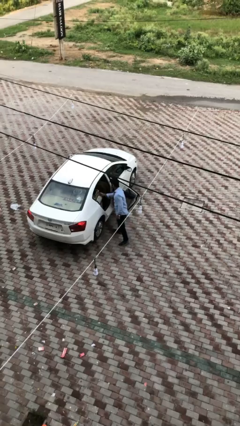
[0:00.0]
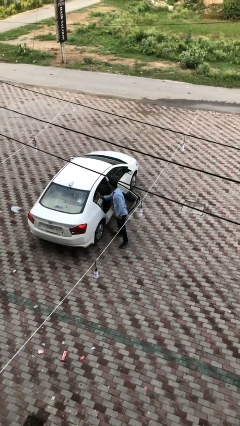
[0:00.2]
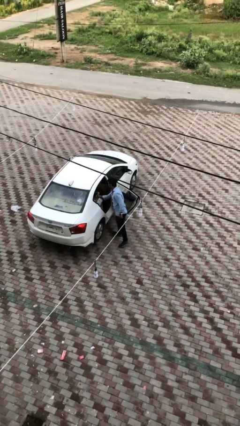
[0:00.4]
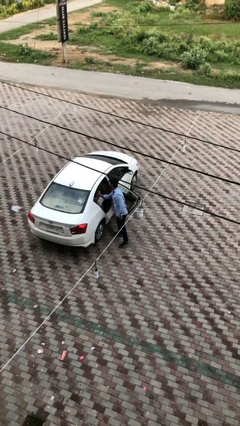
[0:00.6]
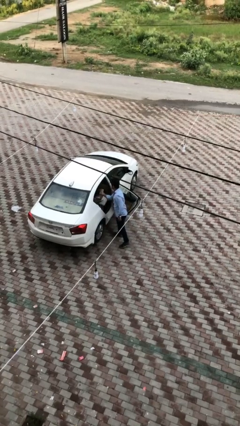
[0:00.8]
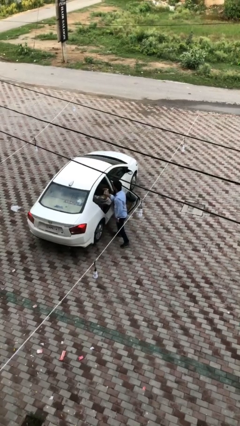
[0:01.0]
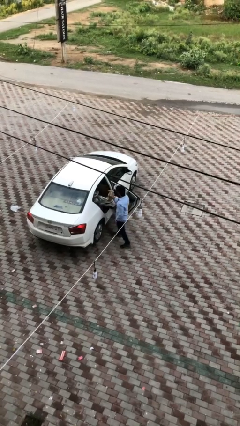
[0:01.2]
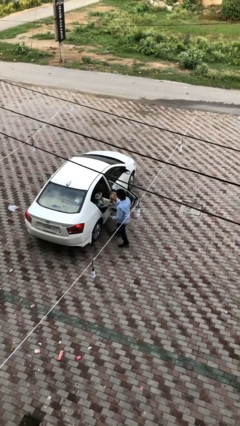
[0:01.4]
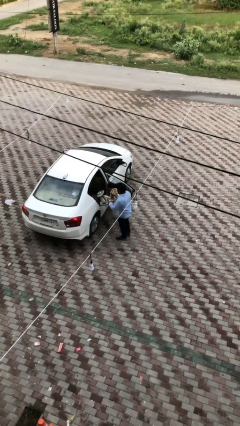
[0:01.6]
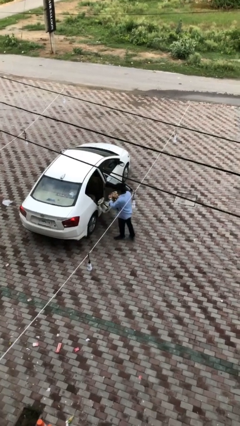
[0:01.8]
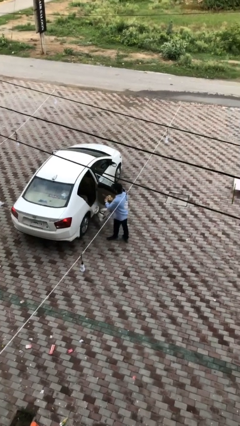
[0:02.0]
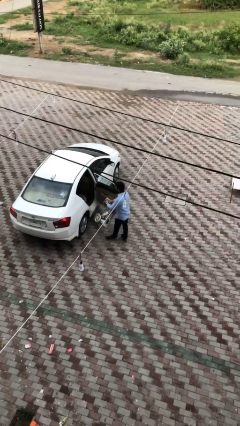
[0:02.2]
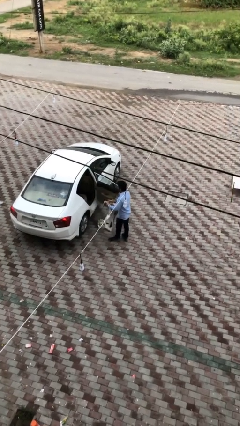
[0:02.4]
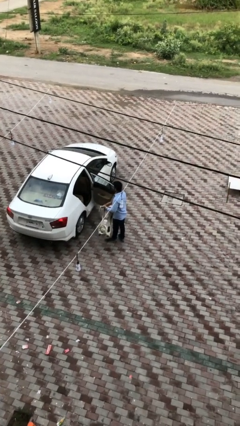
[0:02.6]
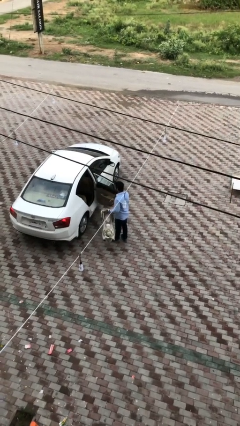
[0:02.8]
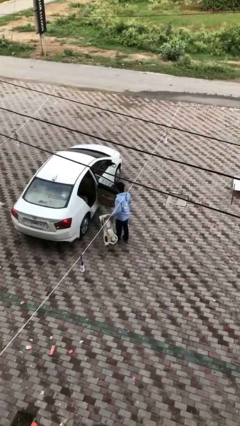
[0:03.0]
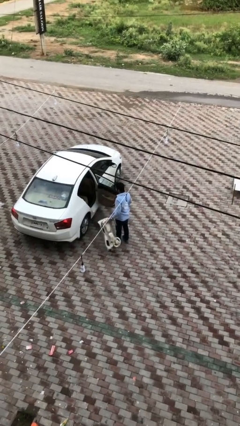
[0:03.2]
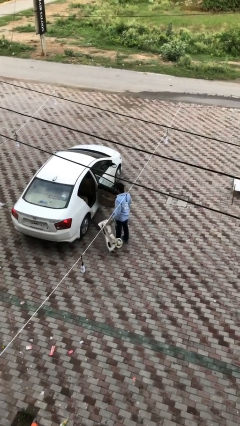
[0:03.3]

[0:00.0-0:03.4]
person unloads car

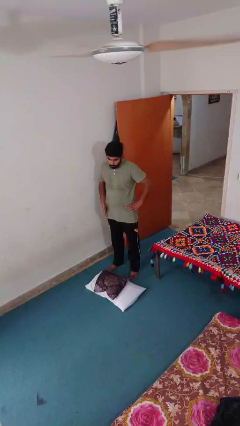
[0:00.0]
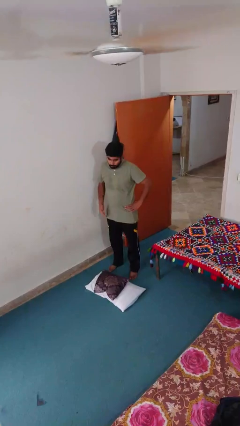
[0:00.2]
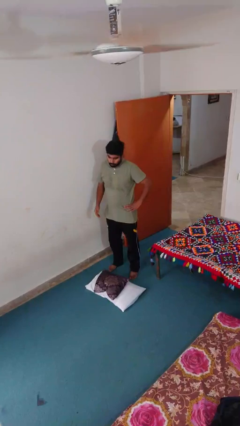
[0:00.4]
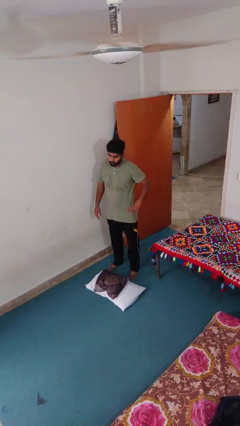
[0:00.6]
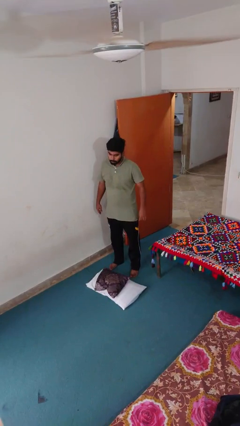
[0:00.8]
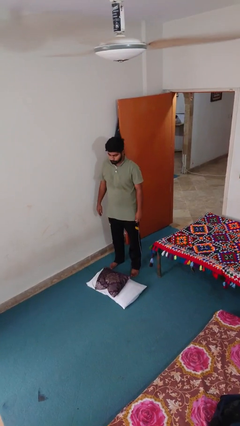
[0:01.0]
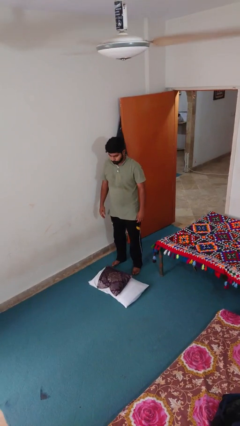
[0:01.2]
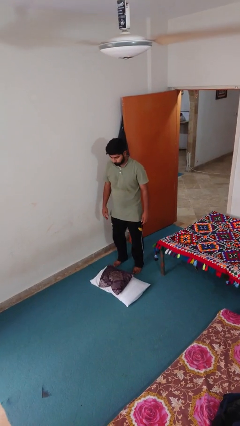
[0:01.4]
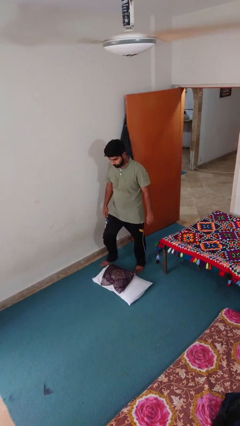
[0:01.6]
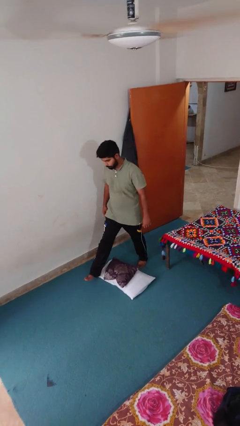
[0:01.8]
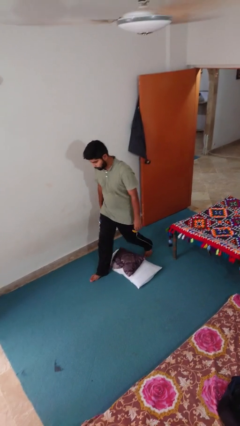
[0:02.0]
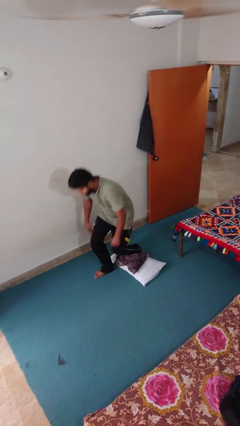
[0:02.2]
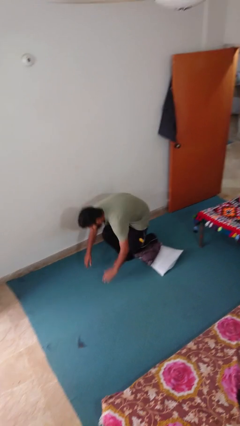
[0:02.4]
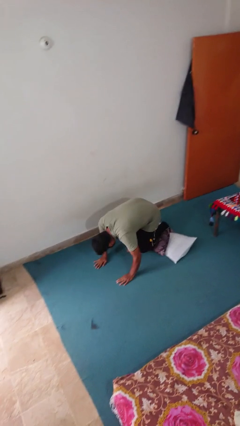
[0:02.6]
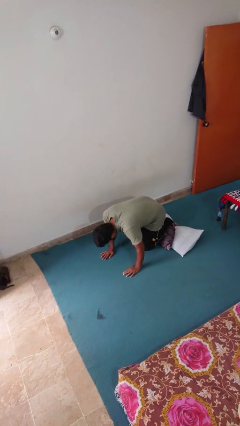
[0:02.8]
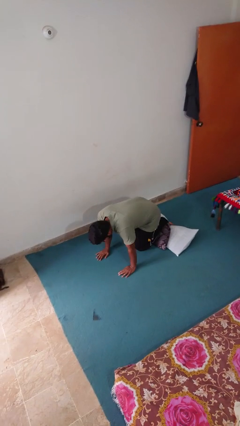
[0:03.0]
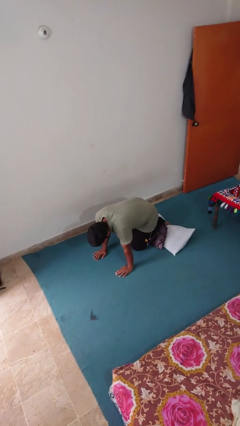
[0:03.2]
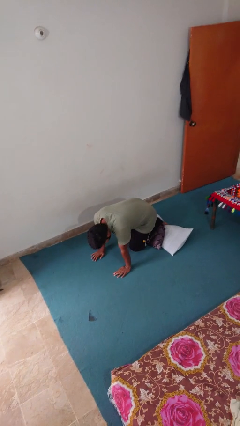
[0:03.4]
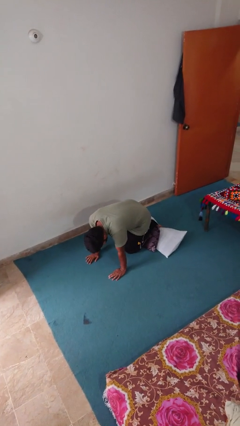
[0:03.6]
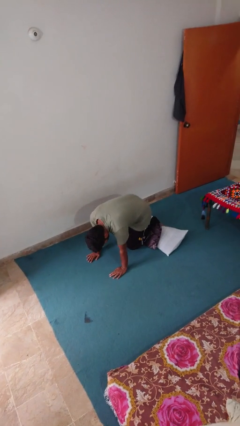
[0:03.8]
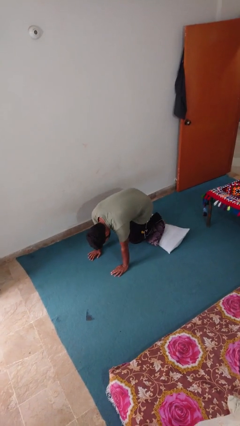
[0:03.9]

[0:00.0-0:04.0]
person trips on object on floor

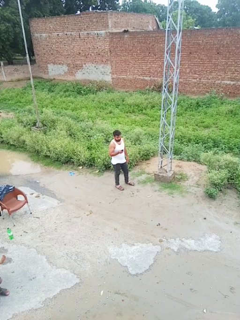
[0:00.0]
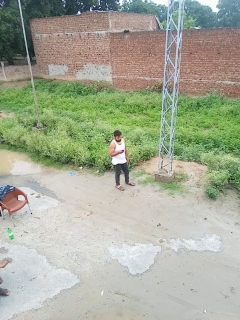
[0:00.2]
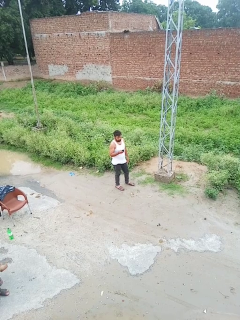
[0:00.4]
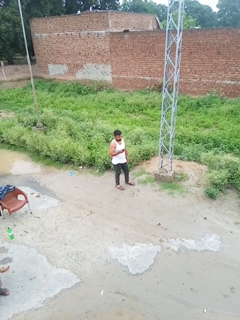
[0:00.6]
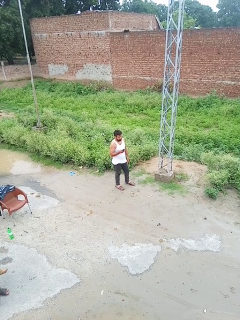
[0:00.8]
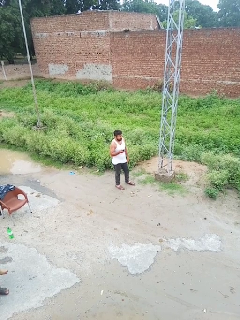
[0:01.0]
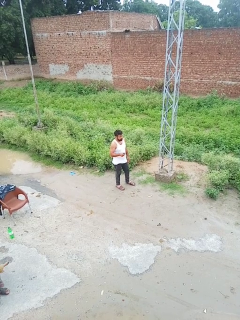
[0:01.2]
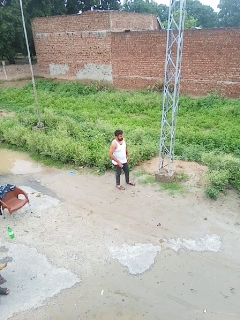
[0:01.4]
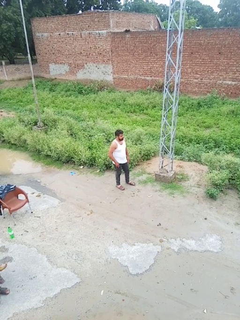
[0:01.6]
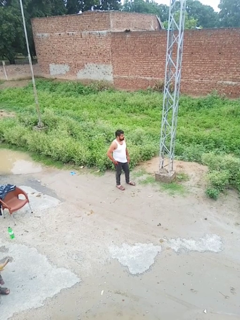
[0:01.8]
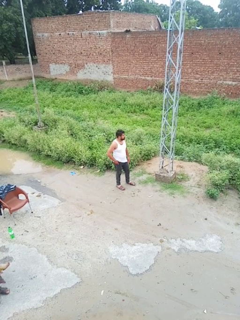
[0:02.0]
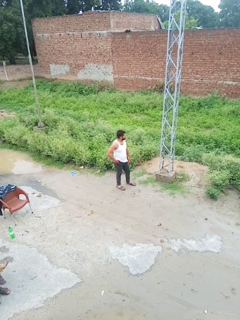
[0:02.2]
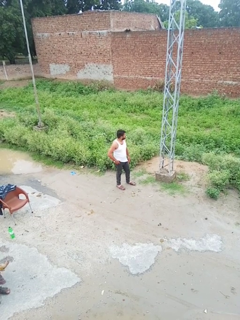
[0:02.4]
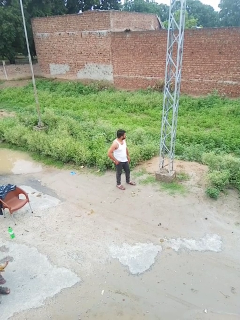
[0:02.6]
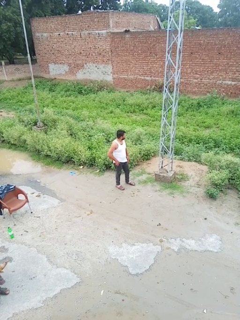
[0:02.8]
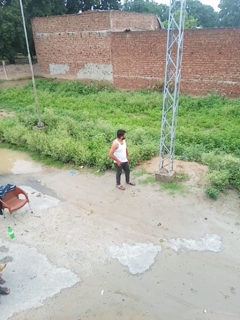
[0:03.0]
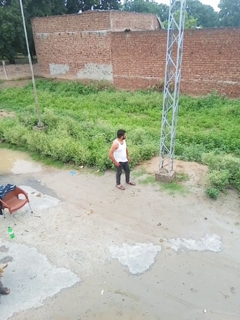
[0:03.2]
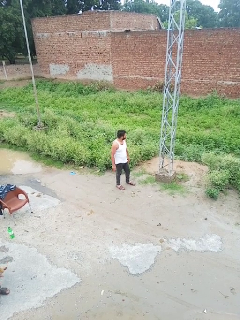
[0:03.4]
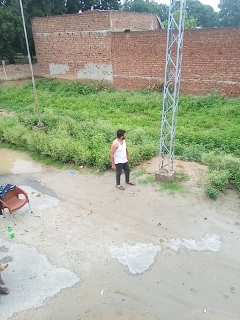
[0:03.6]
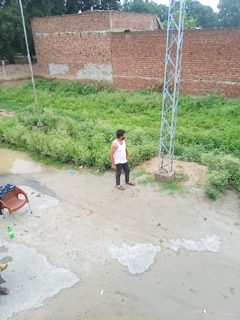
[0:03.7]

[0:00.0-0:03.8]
person puts phone into pocket

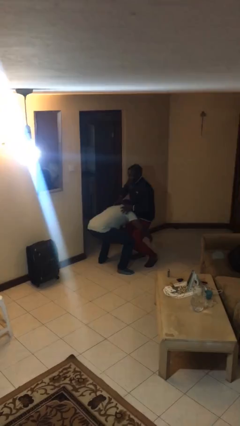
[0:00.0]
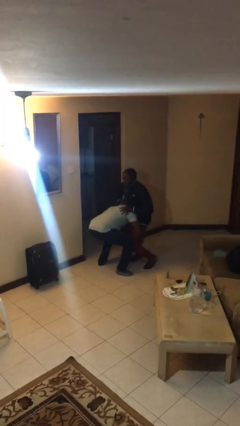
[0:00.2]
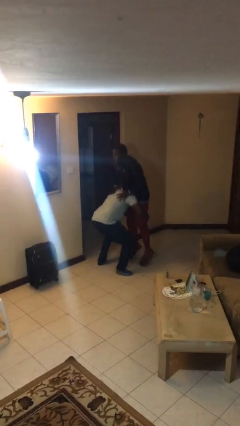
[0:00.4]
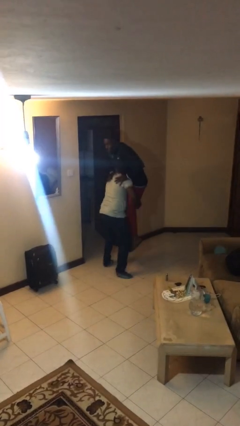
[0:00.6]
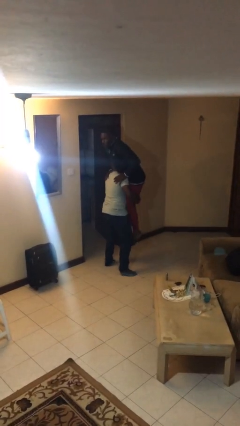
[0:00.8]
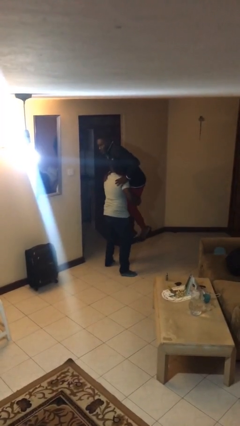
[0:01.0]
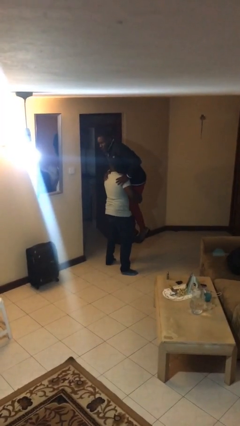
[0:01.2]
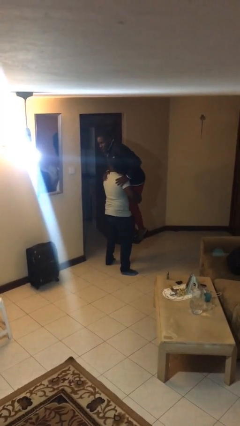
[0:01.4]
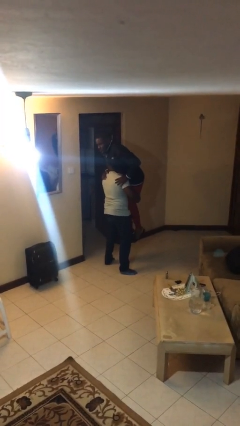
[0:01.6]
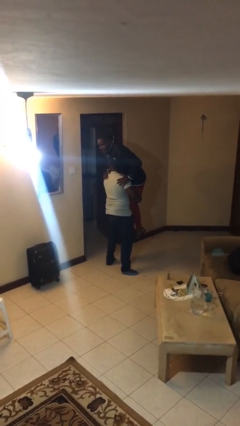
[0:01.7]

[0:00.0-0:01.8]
person picks up person

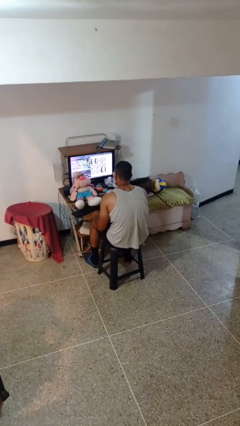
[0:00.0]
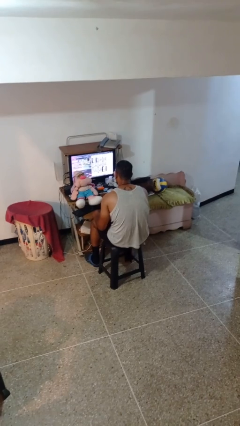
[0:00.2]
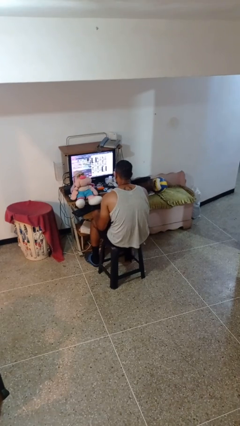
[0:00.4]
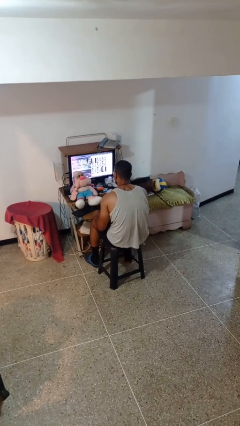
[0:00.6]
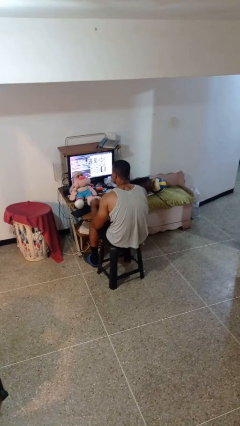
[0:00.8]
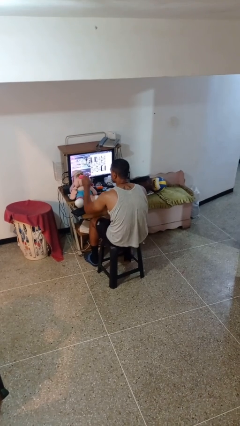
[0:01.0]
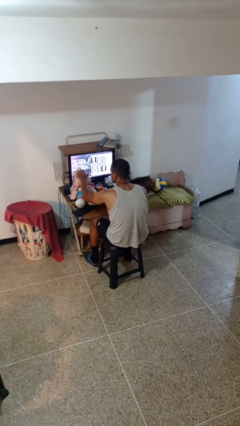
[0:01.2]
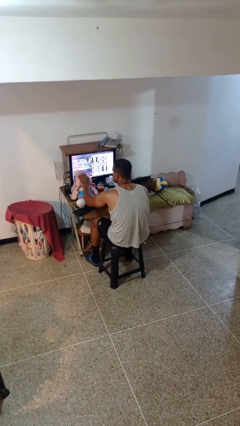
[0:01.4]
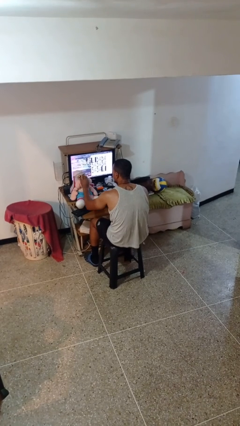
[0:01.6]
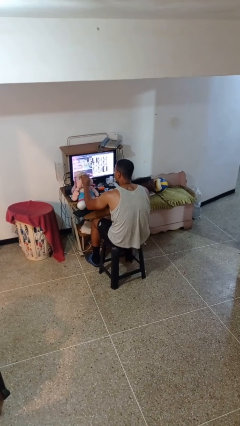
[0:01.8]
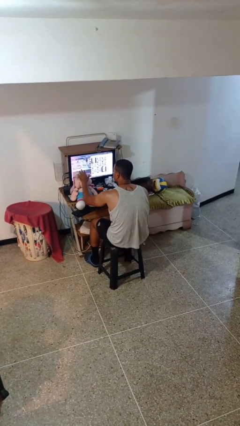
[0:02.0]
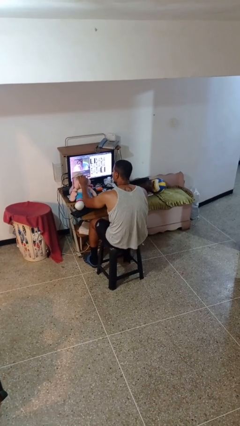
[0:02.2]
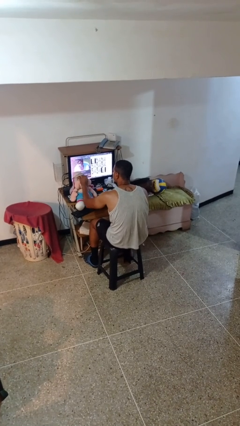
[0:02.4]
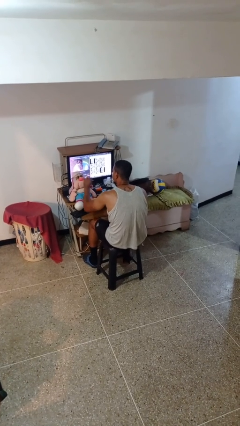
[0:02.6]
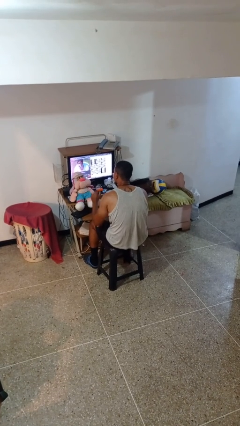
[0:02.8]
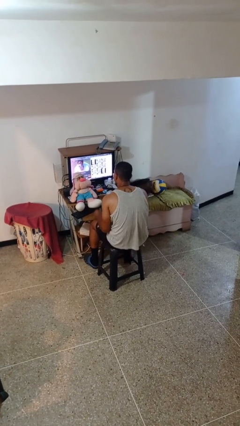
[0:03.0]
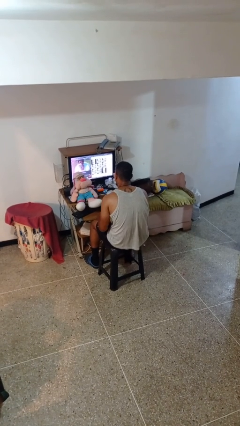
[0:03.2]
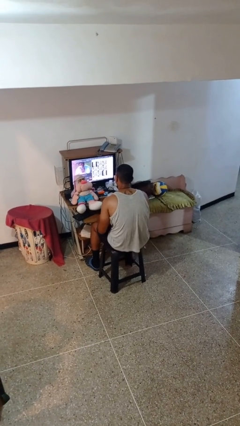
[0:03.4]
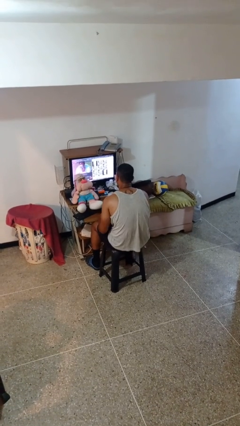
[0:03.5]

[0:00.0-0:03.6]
person waves hand over object

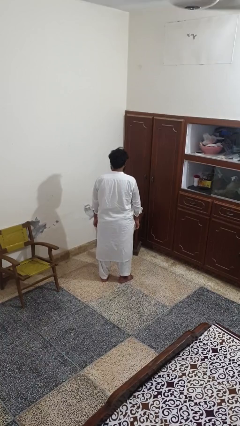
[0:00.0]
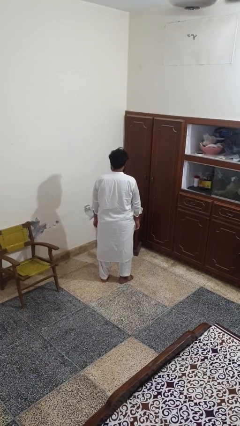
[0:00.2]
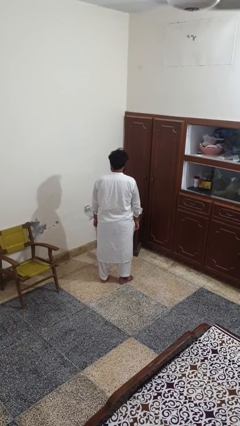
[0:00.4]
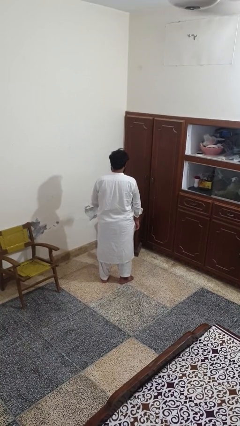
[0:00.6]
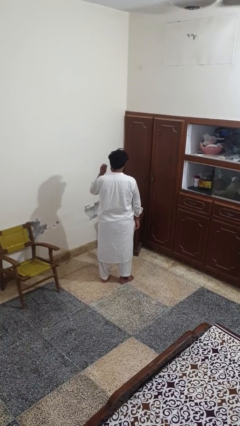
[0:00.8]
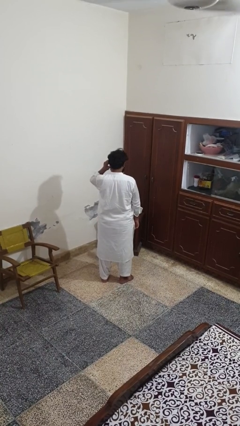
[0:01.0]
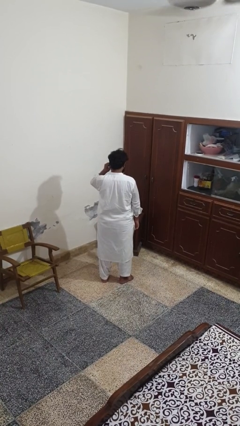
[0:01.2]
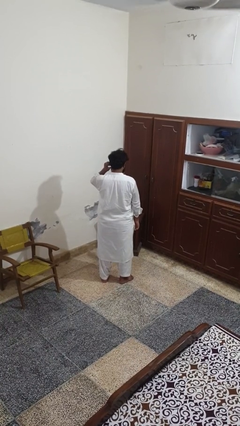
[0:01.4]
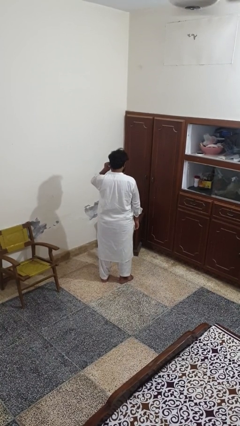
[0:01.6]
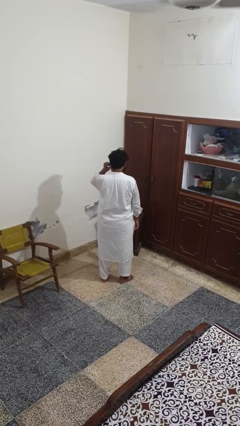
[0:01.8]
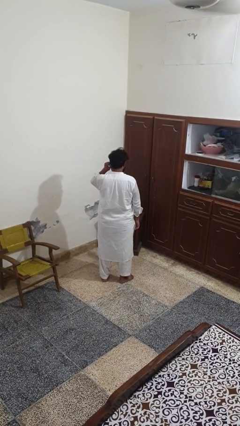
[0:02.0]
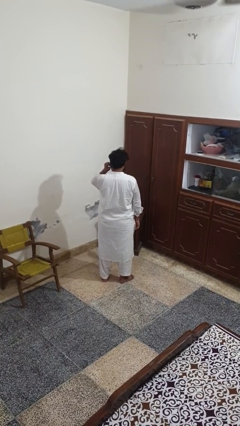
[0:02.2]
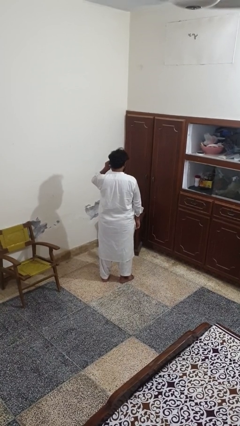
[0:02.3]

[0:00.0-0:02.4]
person touches earlobe
